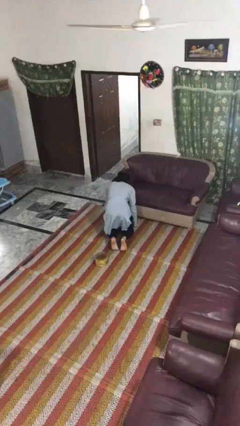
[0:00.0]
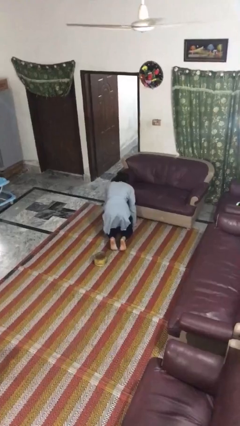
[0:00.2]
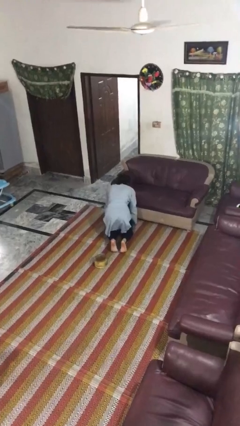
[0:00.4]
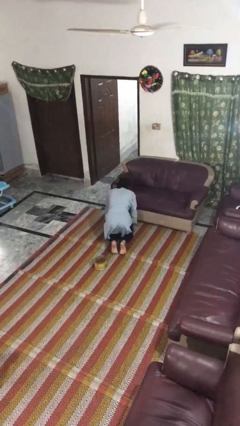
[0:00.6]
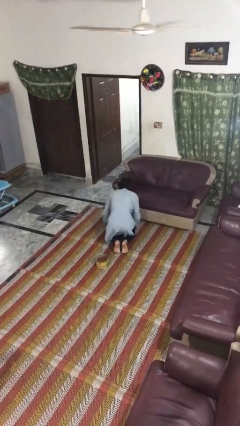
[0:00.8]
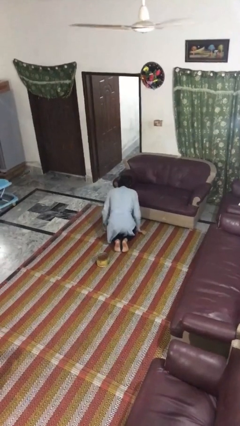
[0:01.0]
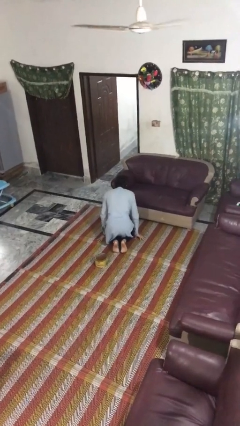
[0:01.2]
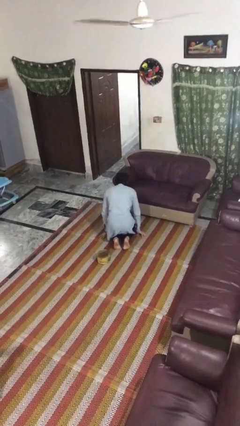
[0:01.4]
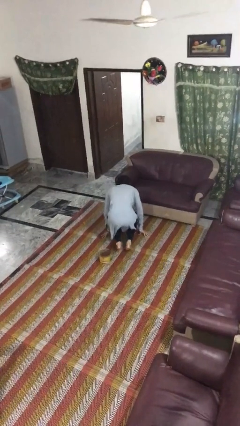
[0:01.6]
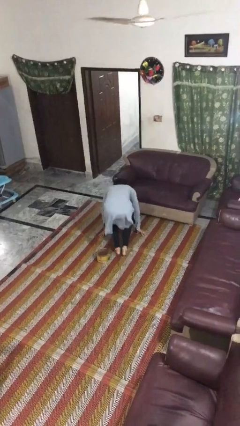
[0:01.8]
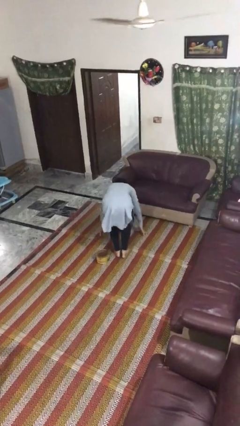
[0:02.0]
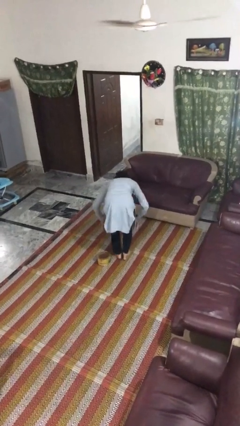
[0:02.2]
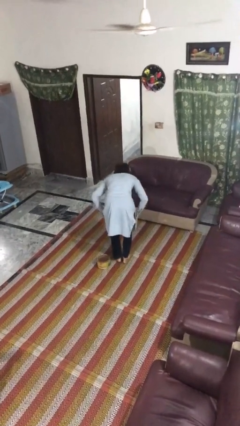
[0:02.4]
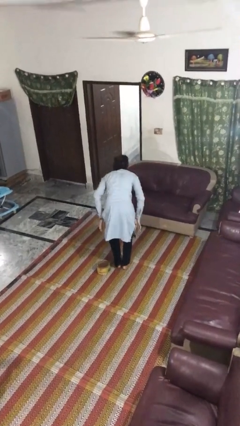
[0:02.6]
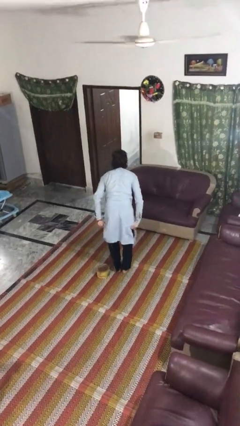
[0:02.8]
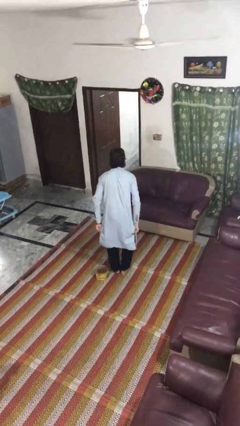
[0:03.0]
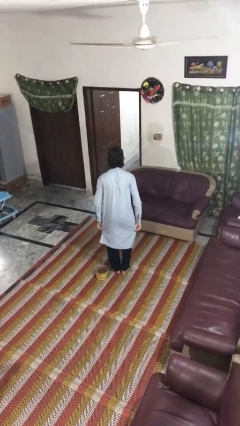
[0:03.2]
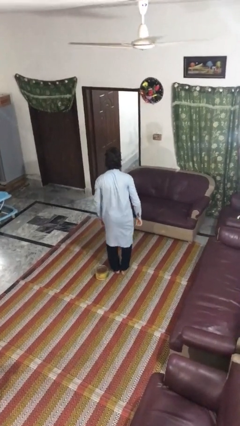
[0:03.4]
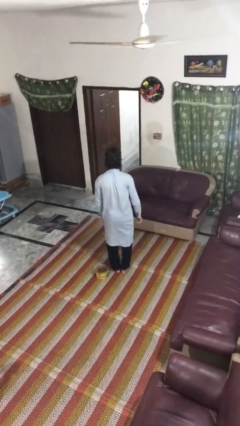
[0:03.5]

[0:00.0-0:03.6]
person stands up from floor

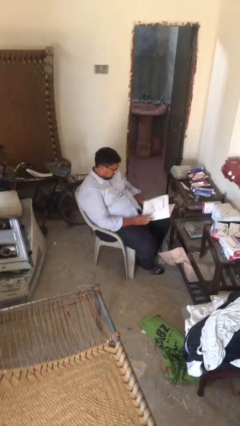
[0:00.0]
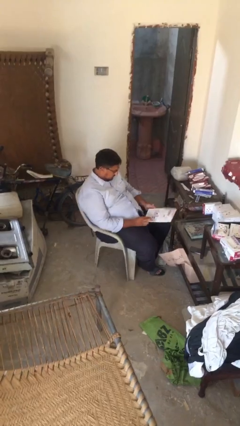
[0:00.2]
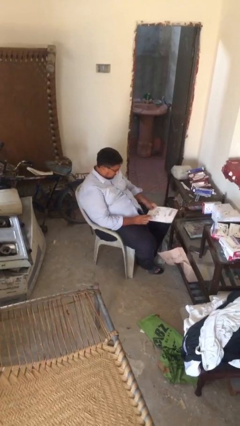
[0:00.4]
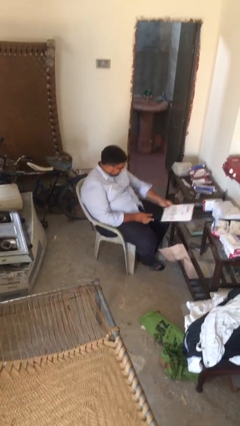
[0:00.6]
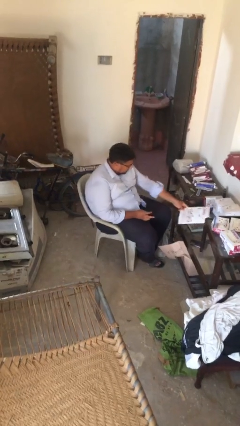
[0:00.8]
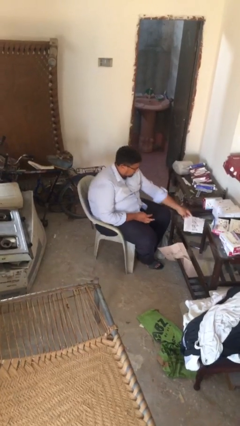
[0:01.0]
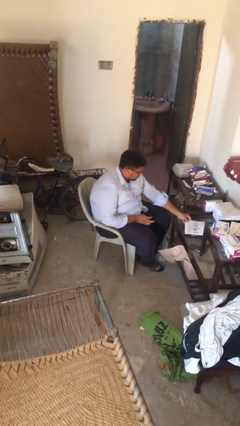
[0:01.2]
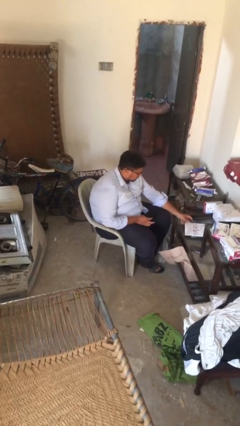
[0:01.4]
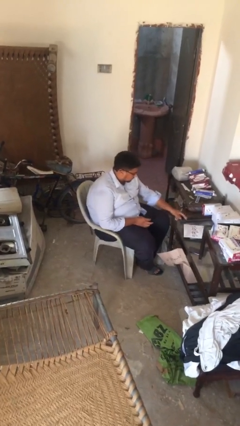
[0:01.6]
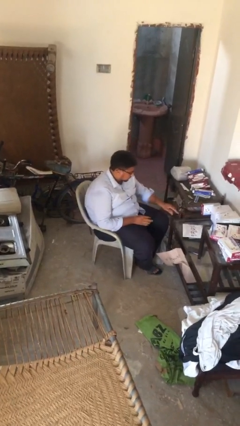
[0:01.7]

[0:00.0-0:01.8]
person puts down object on table

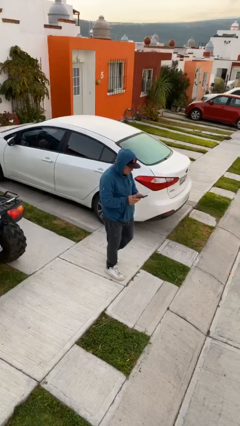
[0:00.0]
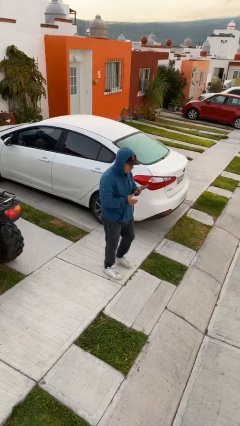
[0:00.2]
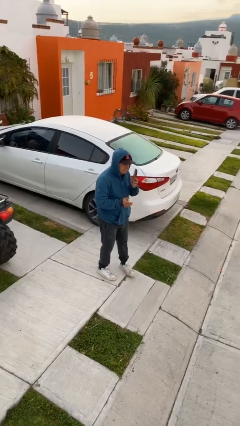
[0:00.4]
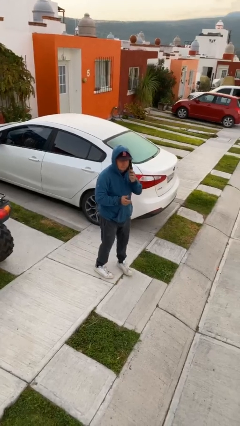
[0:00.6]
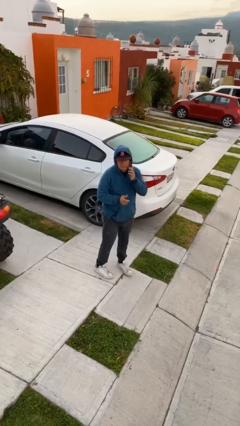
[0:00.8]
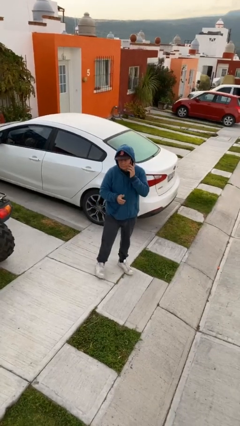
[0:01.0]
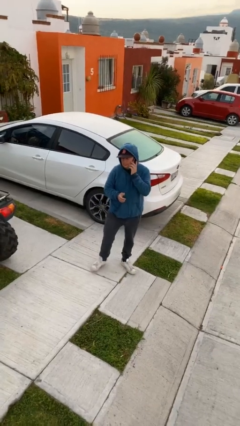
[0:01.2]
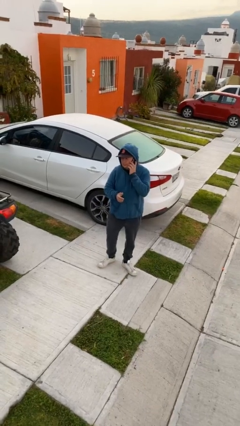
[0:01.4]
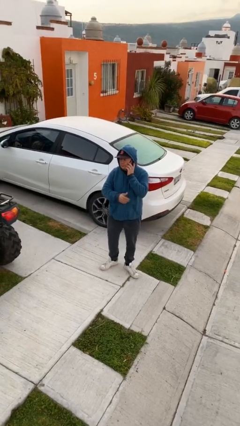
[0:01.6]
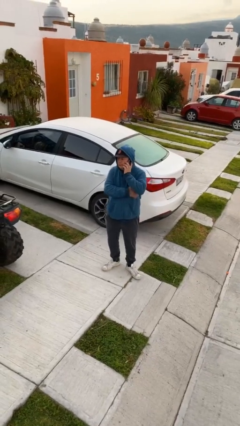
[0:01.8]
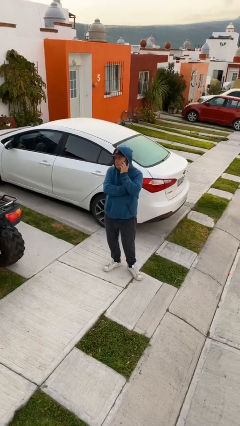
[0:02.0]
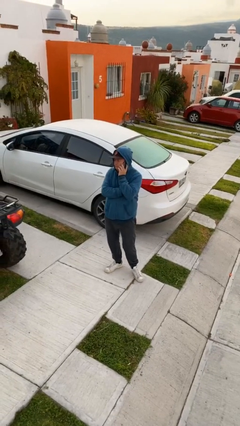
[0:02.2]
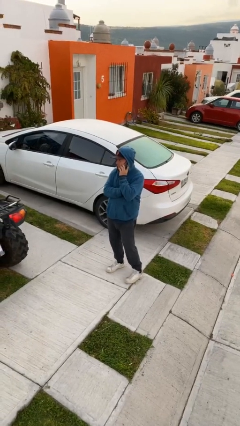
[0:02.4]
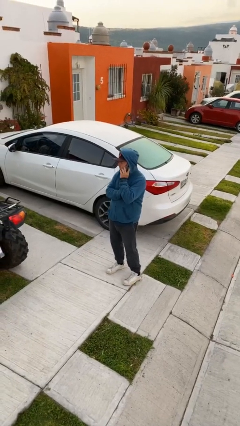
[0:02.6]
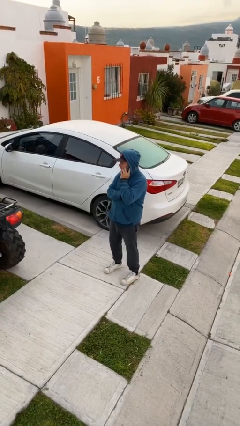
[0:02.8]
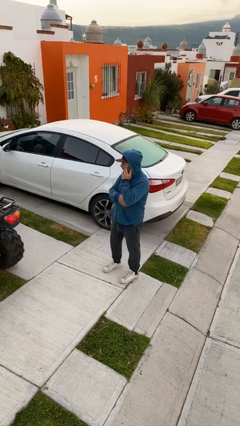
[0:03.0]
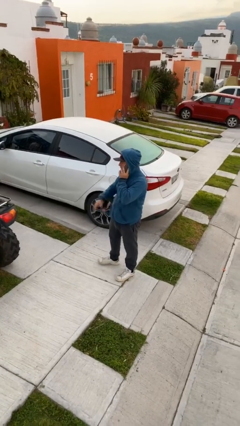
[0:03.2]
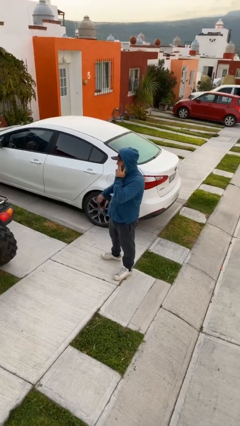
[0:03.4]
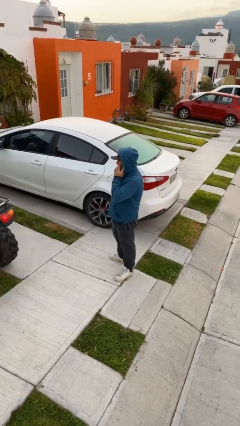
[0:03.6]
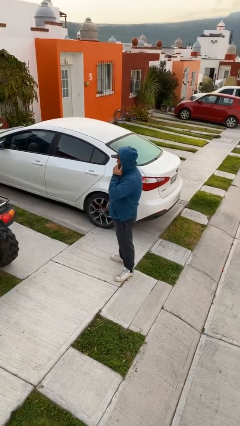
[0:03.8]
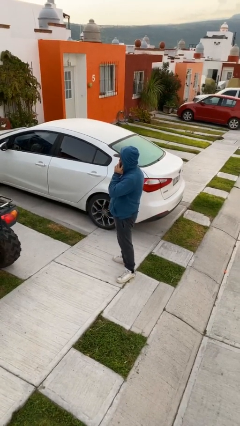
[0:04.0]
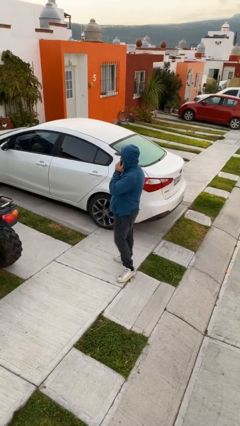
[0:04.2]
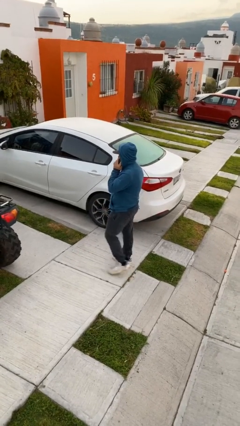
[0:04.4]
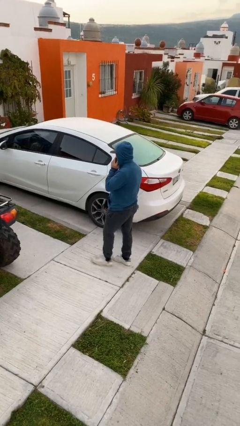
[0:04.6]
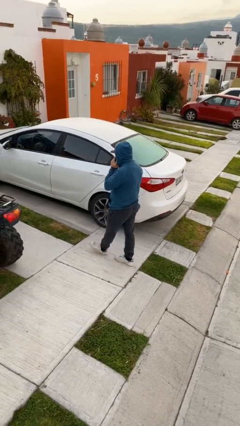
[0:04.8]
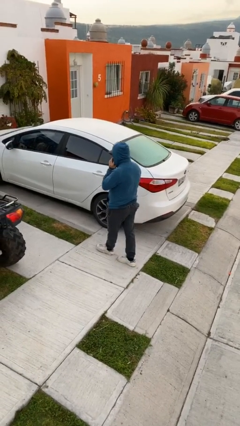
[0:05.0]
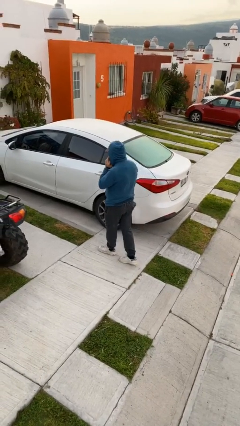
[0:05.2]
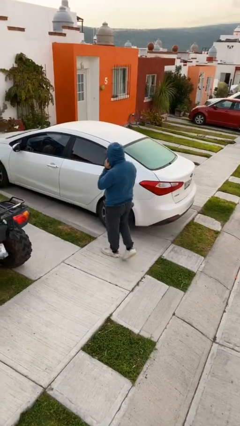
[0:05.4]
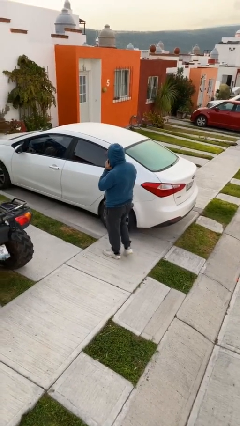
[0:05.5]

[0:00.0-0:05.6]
person talks on phone

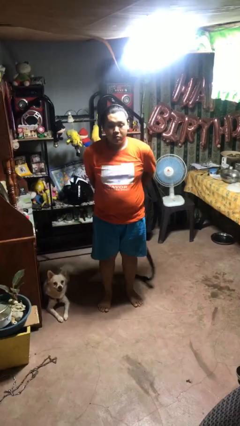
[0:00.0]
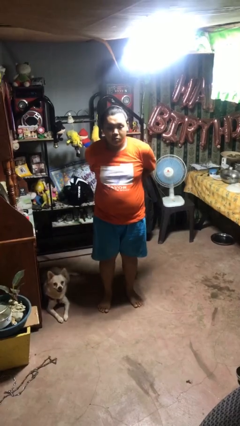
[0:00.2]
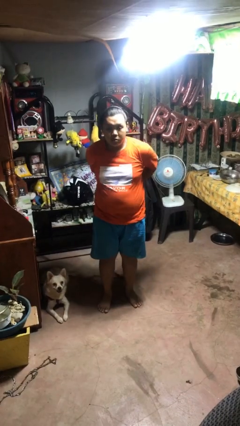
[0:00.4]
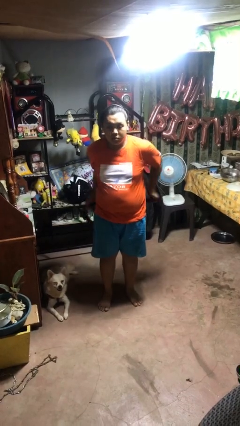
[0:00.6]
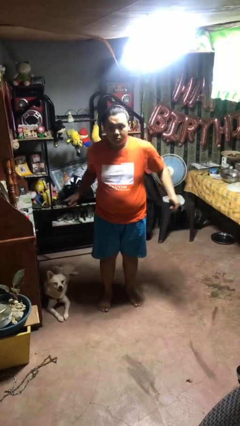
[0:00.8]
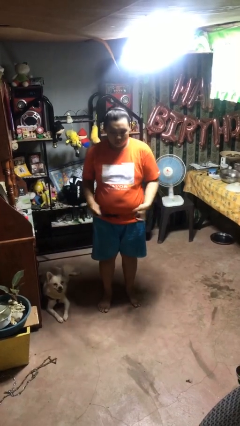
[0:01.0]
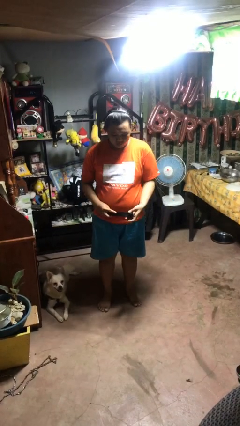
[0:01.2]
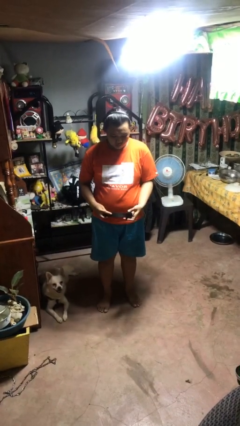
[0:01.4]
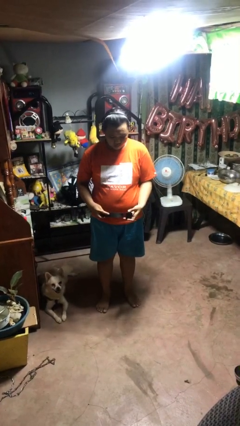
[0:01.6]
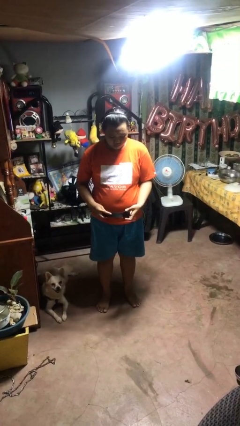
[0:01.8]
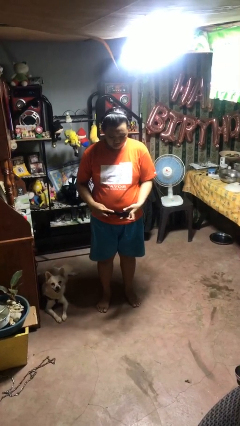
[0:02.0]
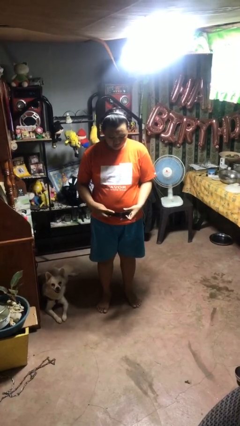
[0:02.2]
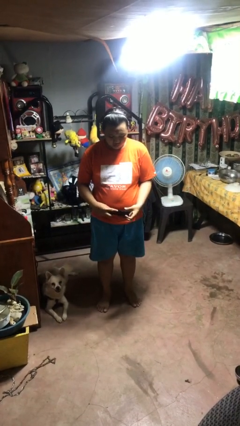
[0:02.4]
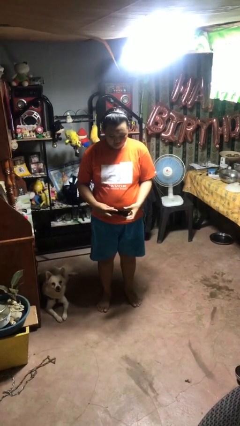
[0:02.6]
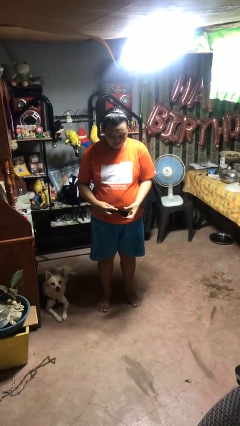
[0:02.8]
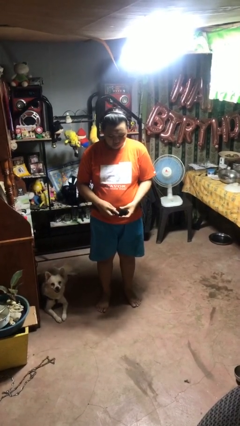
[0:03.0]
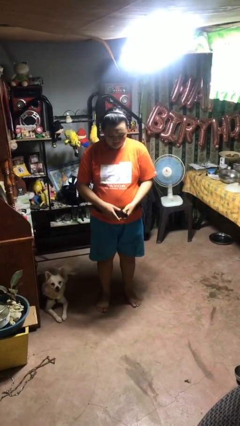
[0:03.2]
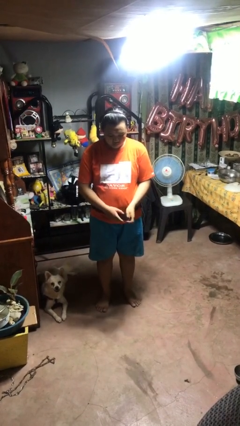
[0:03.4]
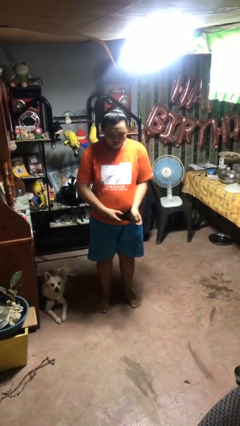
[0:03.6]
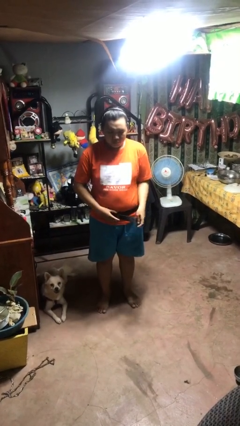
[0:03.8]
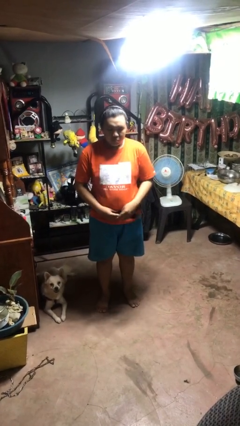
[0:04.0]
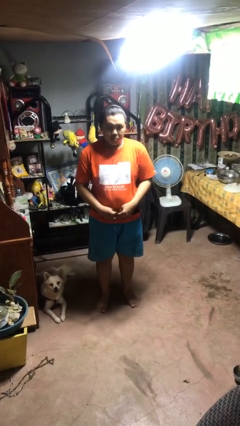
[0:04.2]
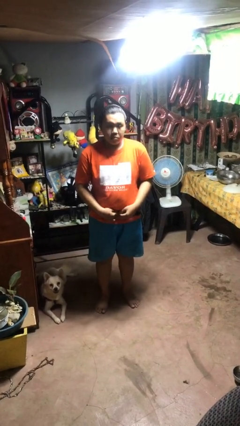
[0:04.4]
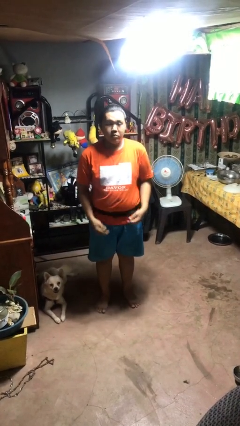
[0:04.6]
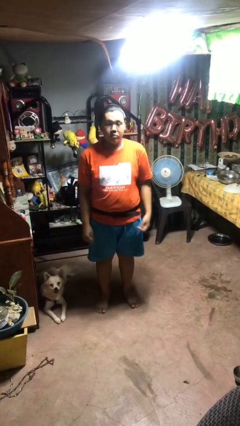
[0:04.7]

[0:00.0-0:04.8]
person puts on belt

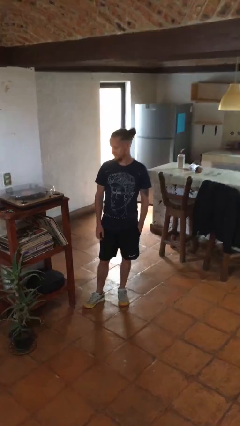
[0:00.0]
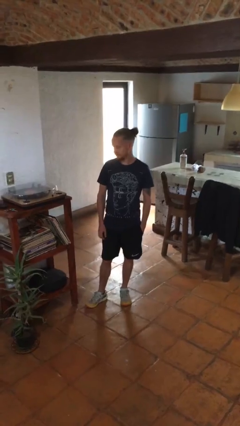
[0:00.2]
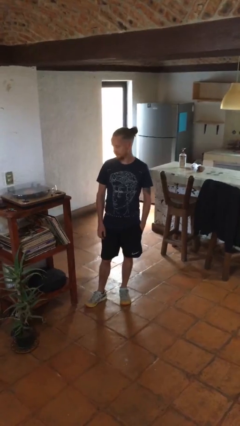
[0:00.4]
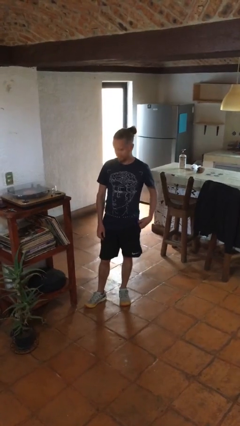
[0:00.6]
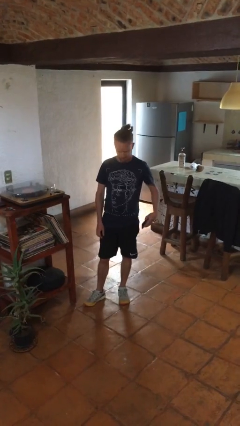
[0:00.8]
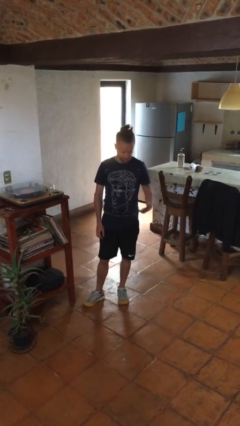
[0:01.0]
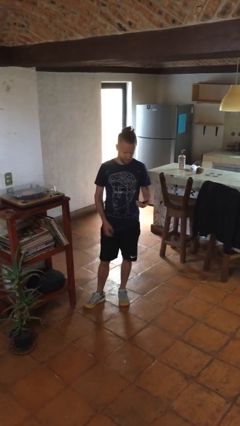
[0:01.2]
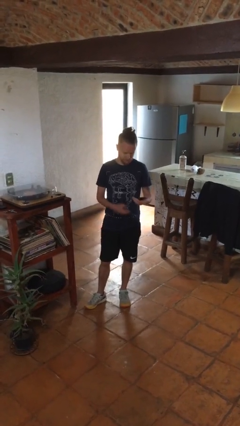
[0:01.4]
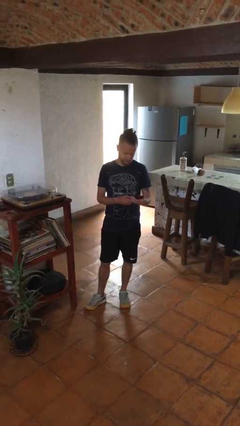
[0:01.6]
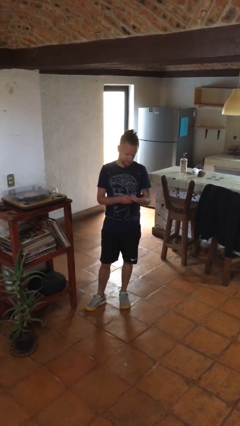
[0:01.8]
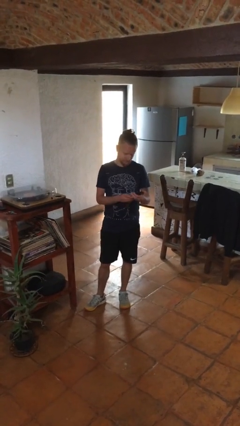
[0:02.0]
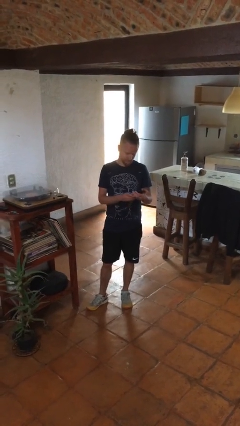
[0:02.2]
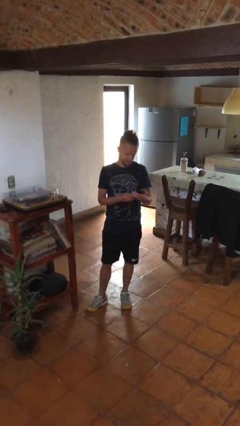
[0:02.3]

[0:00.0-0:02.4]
person takes phone from pocket
